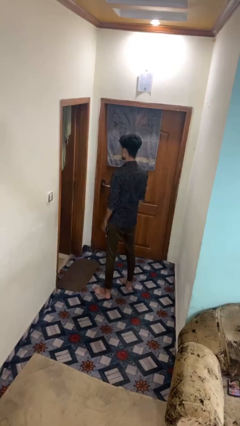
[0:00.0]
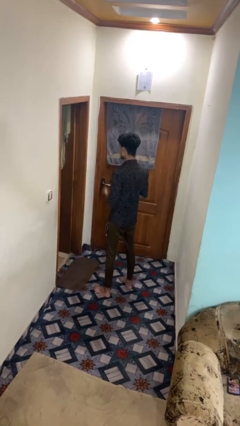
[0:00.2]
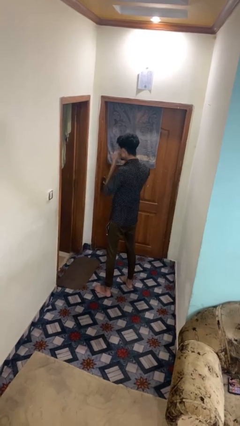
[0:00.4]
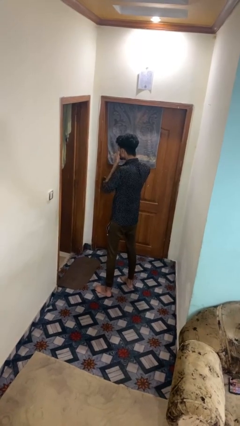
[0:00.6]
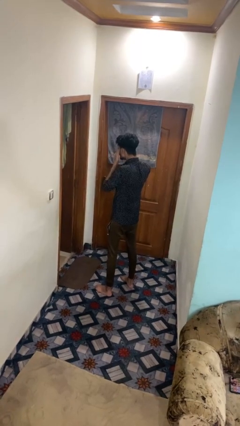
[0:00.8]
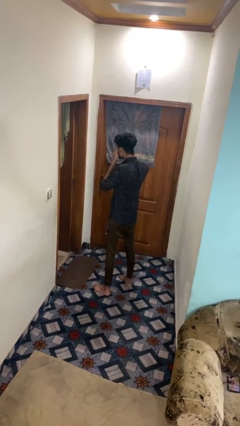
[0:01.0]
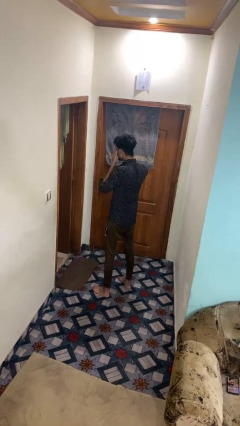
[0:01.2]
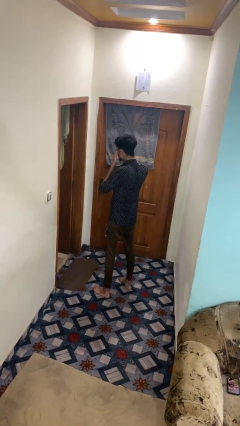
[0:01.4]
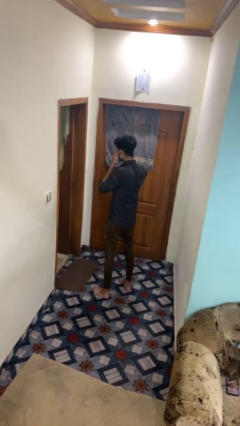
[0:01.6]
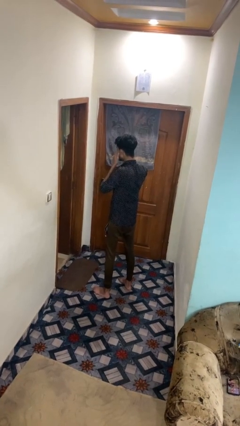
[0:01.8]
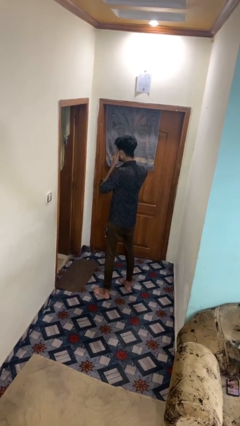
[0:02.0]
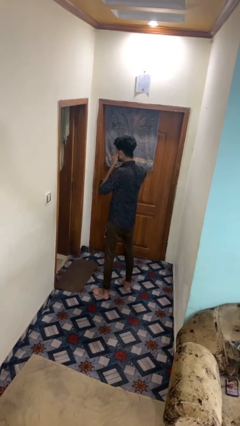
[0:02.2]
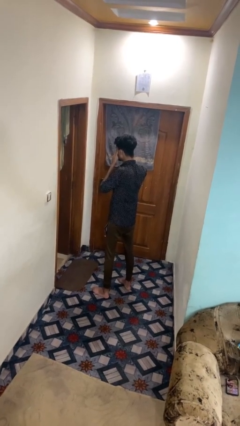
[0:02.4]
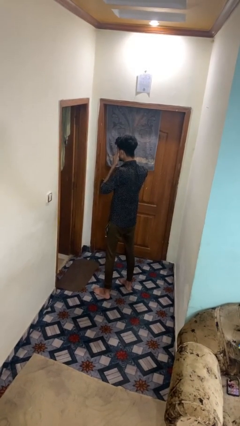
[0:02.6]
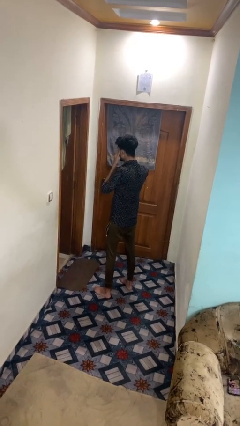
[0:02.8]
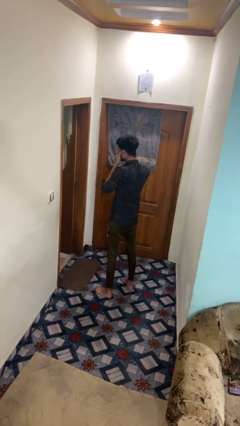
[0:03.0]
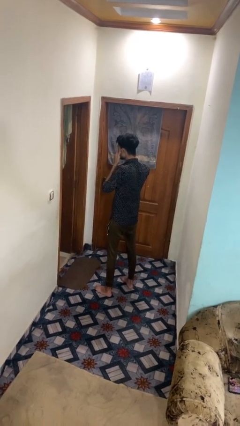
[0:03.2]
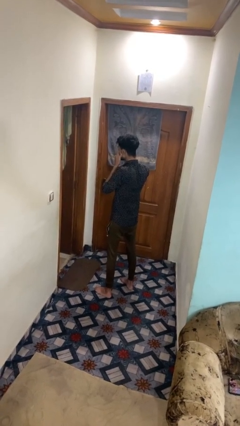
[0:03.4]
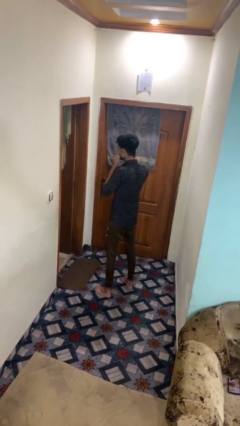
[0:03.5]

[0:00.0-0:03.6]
person rubs eyes

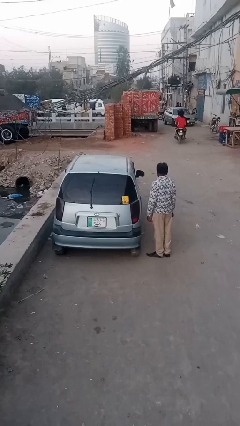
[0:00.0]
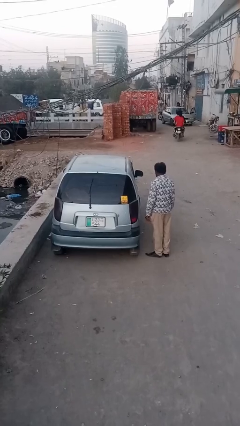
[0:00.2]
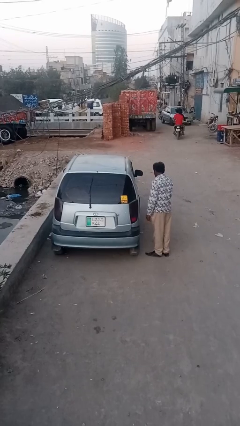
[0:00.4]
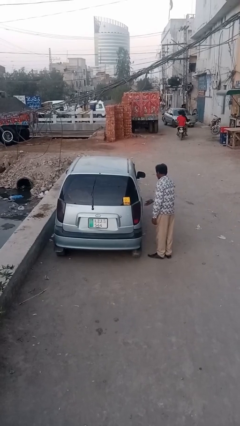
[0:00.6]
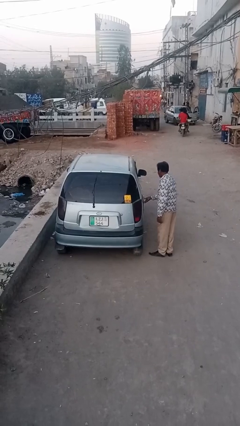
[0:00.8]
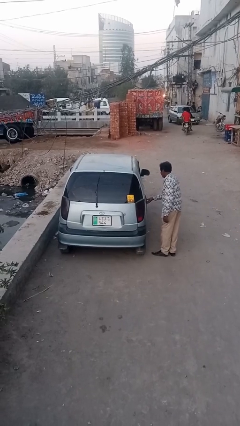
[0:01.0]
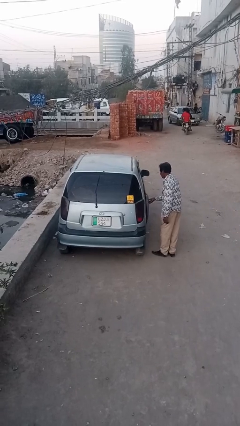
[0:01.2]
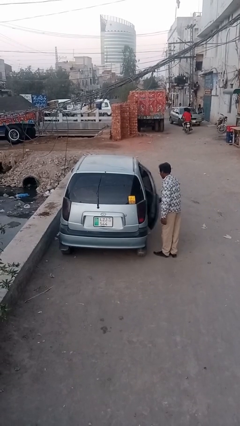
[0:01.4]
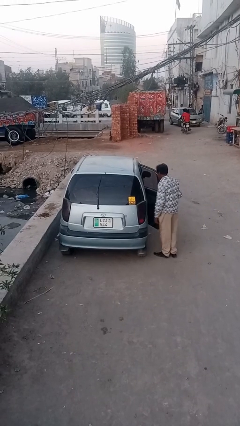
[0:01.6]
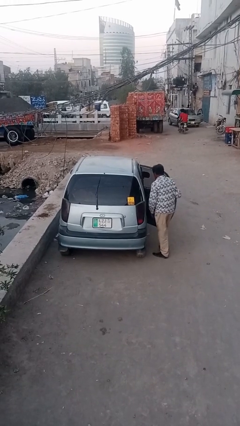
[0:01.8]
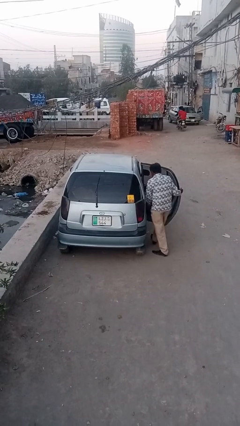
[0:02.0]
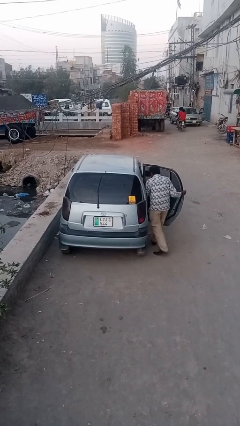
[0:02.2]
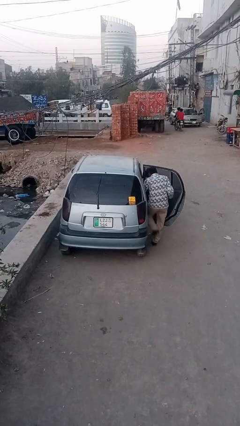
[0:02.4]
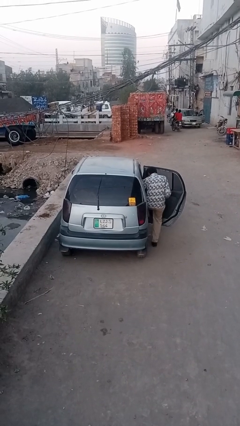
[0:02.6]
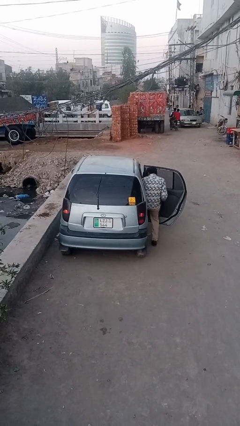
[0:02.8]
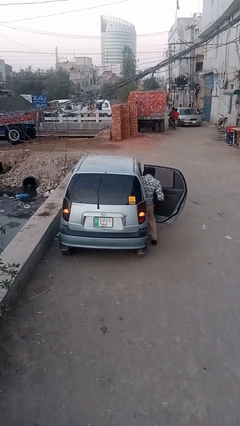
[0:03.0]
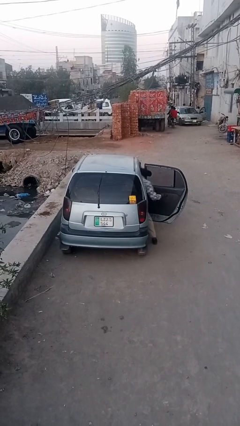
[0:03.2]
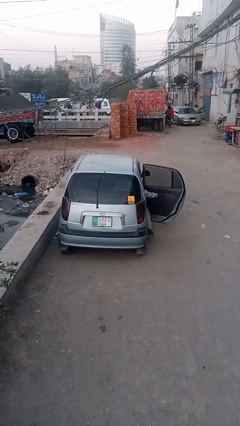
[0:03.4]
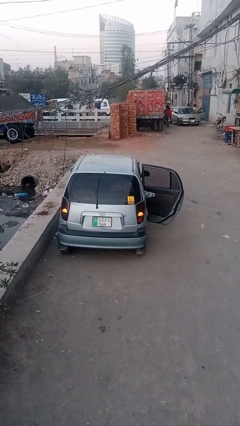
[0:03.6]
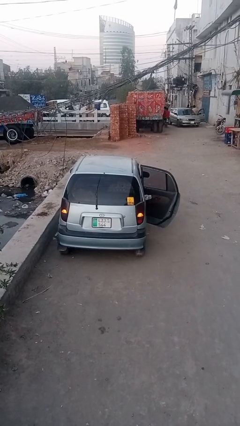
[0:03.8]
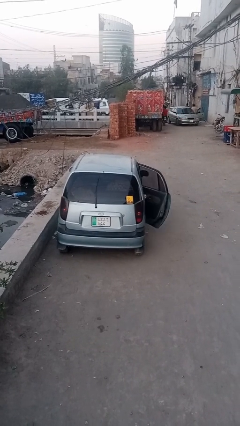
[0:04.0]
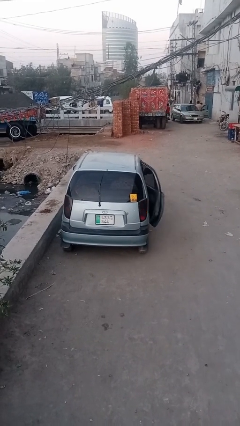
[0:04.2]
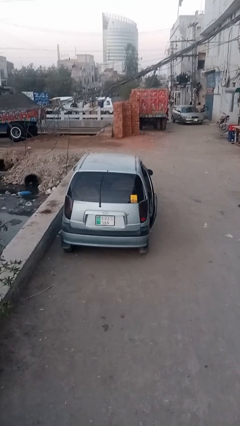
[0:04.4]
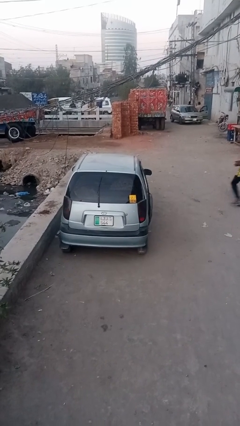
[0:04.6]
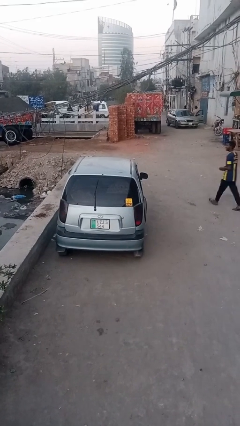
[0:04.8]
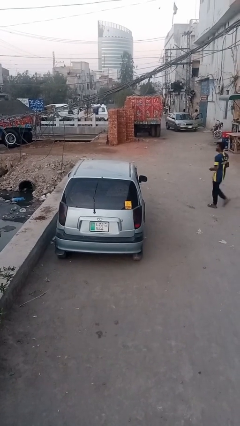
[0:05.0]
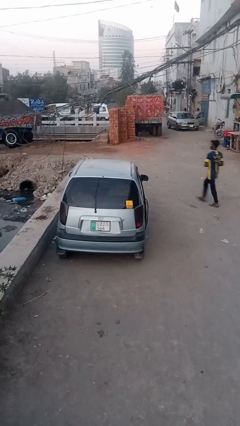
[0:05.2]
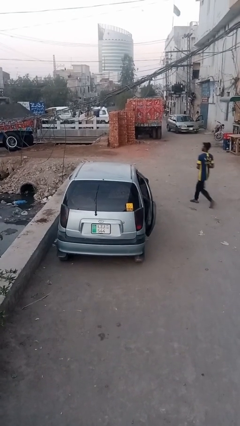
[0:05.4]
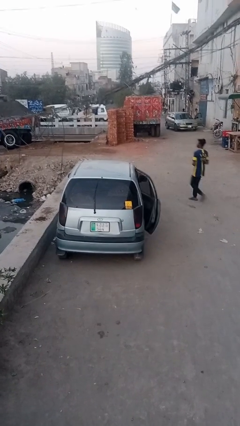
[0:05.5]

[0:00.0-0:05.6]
car picks up person

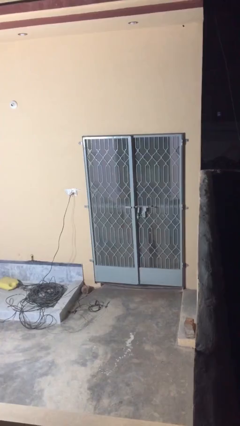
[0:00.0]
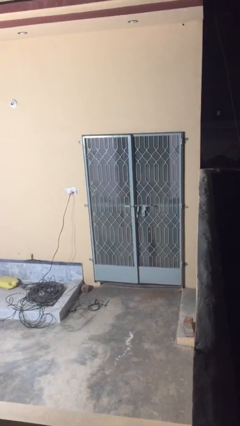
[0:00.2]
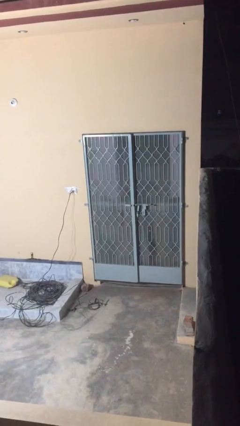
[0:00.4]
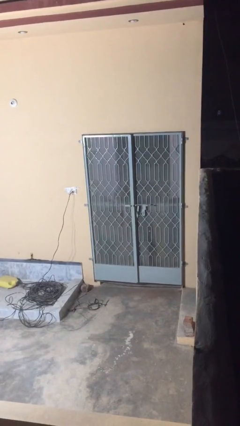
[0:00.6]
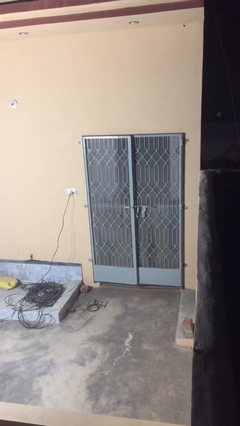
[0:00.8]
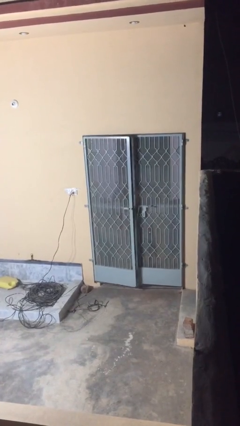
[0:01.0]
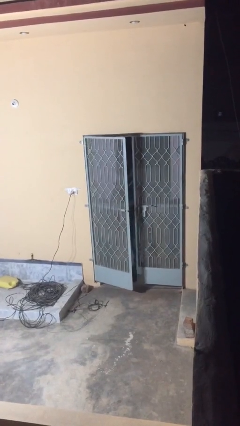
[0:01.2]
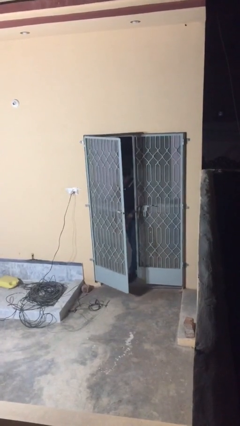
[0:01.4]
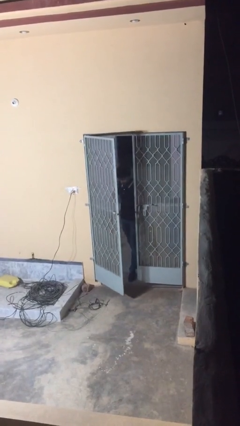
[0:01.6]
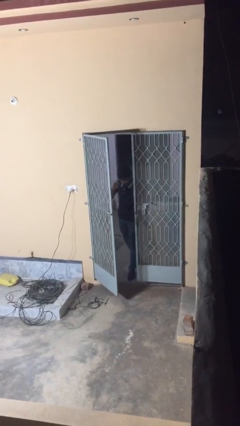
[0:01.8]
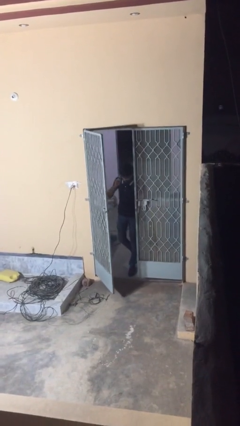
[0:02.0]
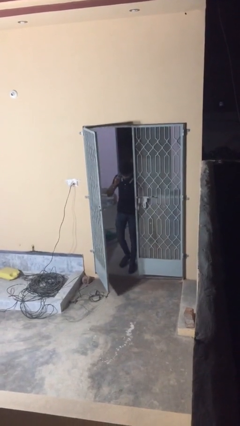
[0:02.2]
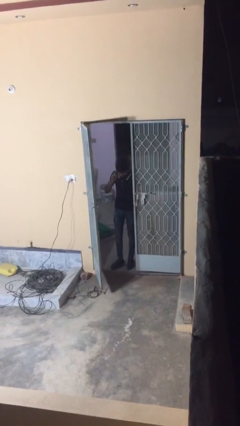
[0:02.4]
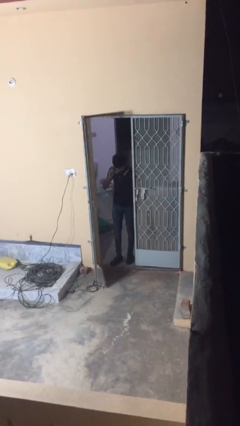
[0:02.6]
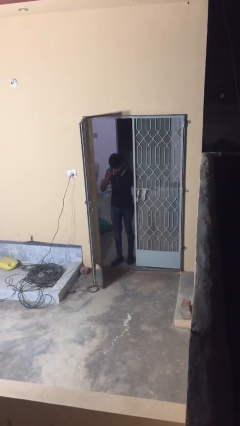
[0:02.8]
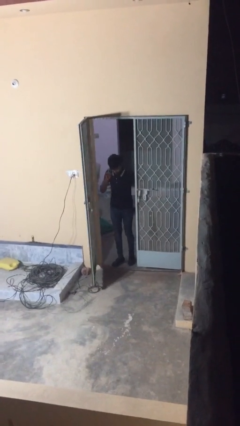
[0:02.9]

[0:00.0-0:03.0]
person opens facility door

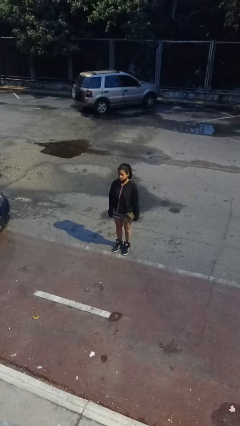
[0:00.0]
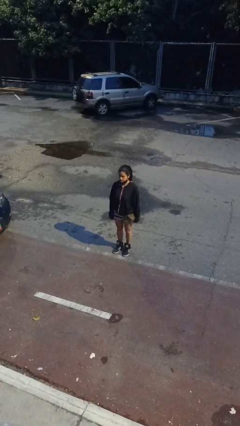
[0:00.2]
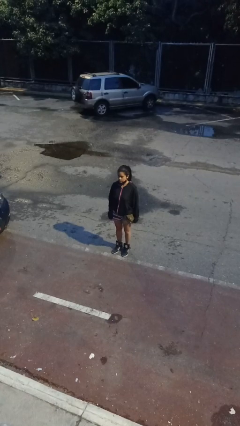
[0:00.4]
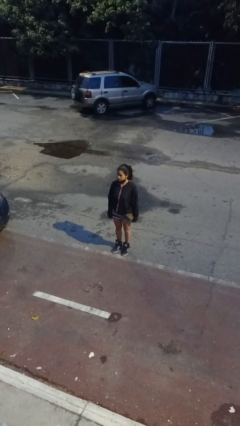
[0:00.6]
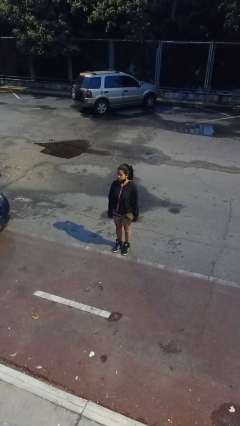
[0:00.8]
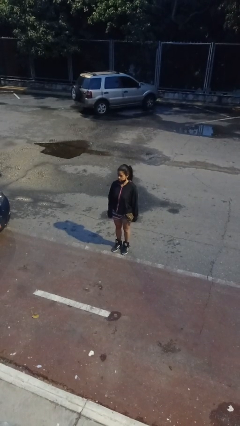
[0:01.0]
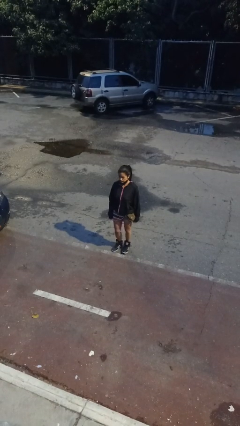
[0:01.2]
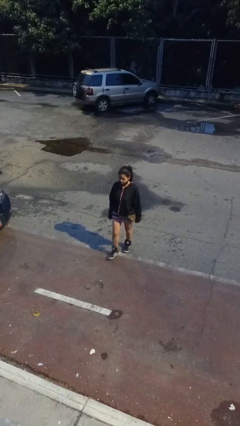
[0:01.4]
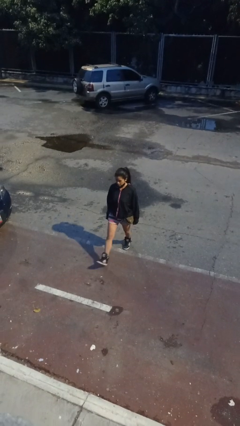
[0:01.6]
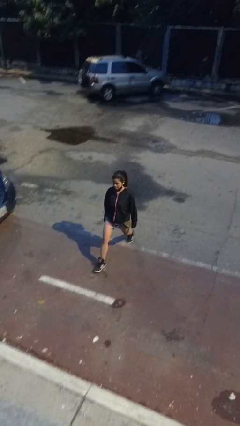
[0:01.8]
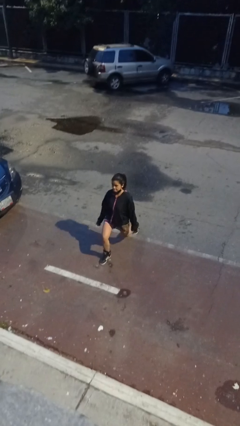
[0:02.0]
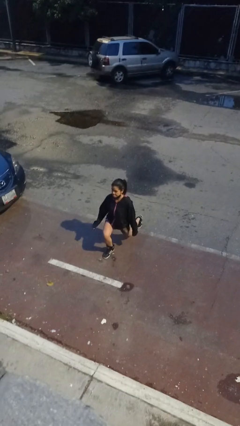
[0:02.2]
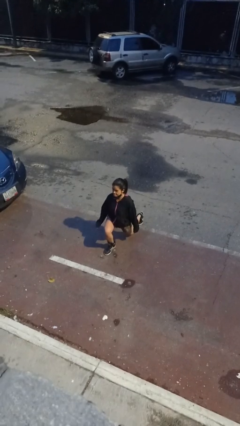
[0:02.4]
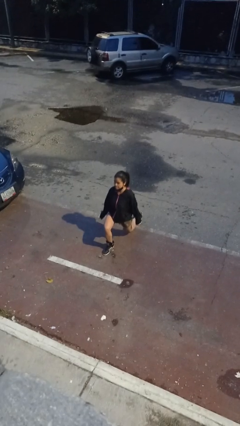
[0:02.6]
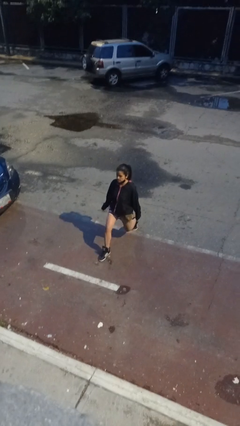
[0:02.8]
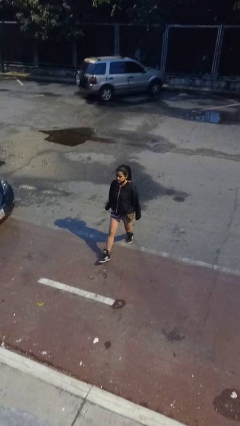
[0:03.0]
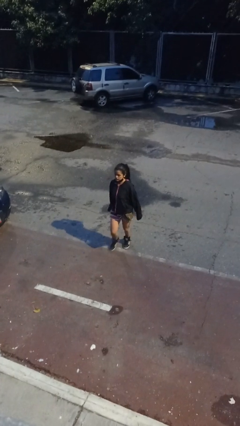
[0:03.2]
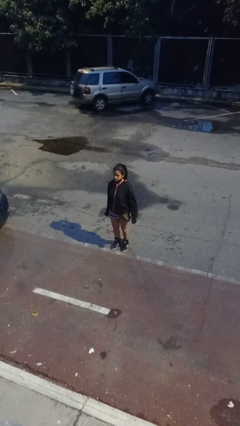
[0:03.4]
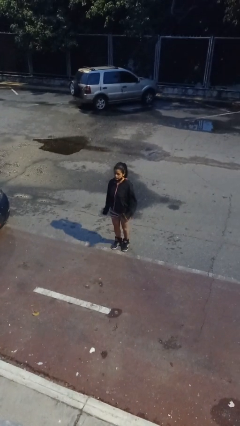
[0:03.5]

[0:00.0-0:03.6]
person exercises with lunges

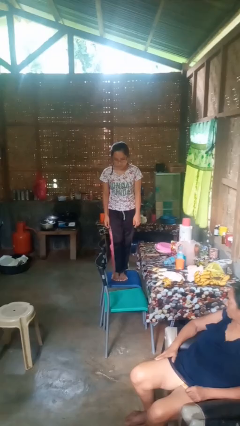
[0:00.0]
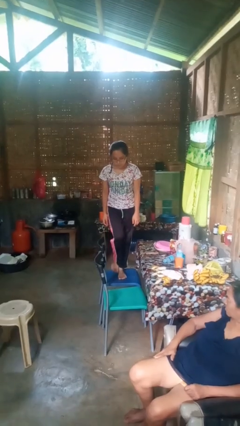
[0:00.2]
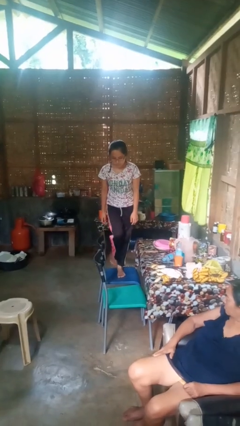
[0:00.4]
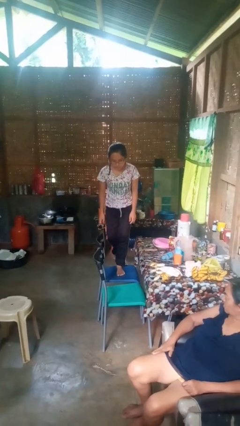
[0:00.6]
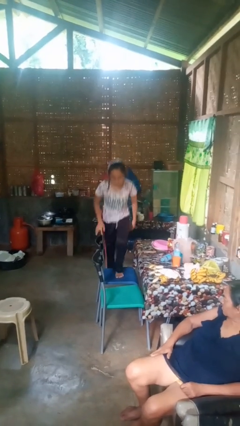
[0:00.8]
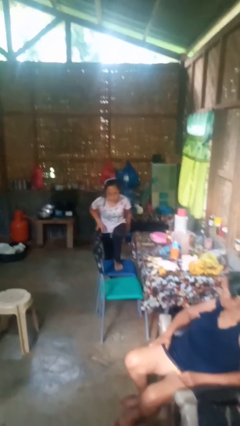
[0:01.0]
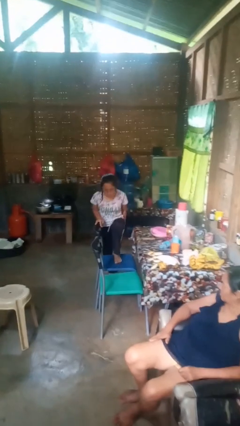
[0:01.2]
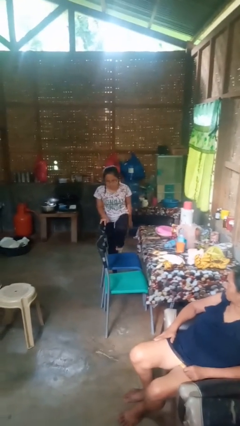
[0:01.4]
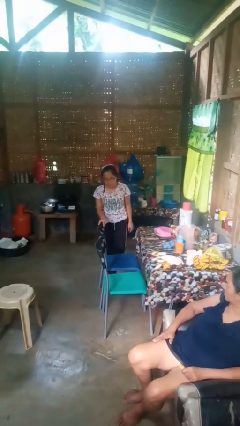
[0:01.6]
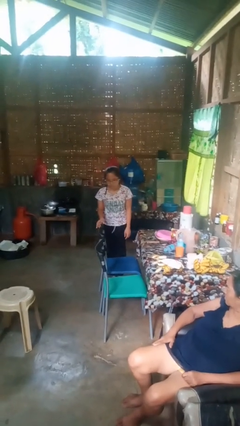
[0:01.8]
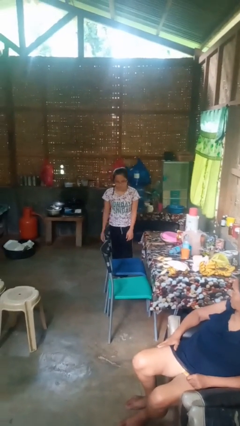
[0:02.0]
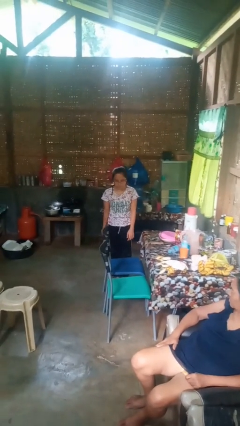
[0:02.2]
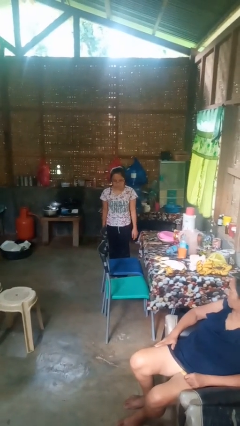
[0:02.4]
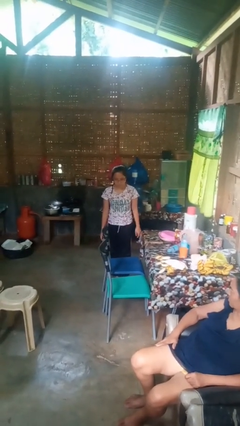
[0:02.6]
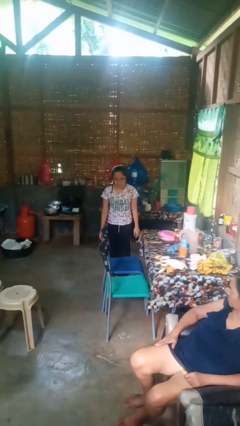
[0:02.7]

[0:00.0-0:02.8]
person climbs off chair
